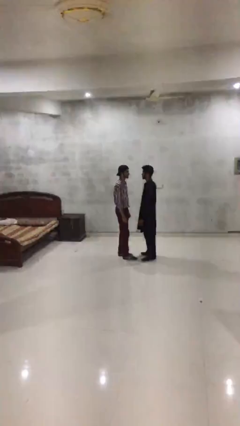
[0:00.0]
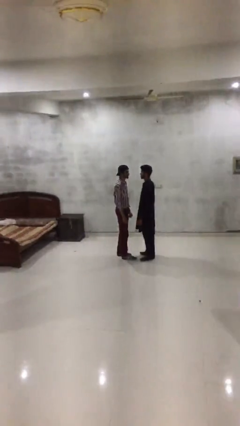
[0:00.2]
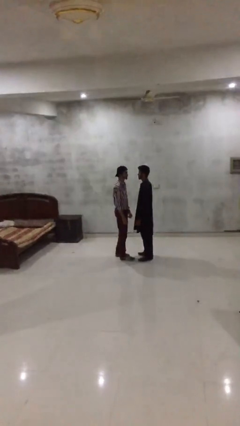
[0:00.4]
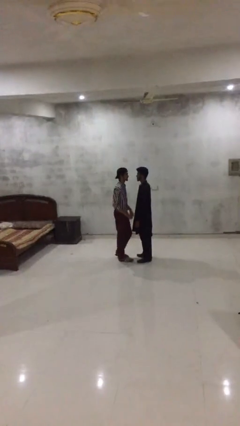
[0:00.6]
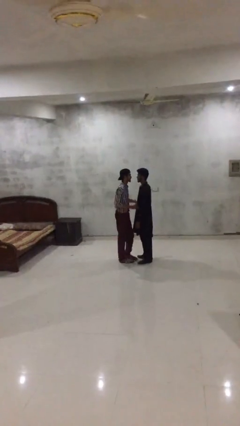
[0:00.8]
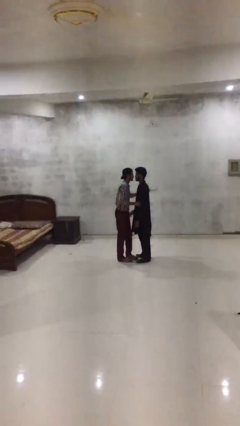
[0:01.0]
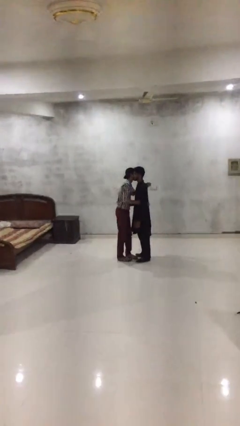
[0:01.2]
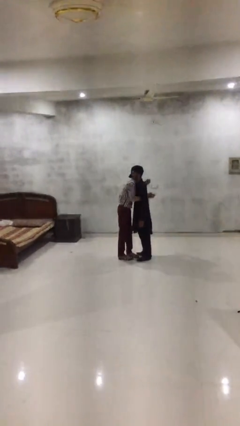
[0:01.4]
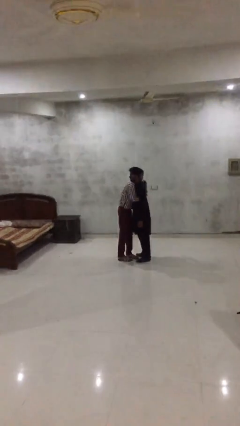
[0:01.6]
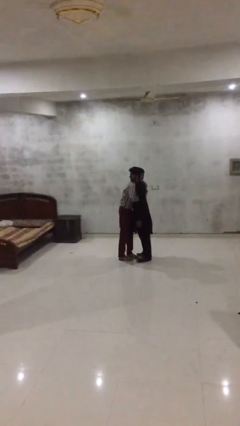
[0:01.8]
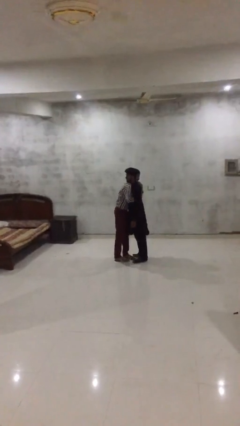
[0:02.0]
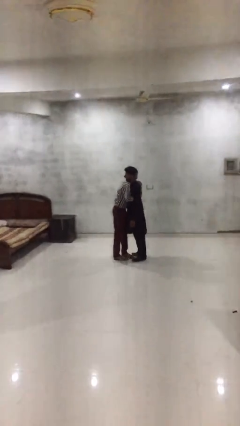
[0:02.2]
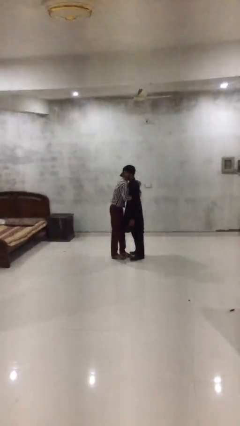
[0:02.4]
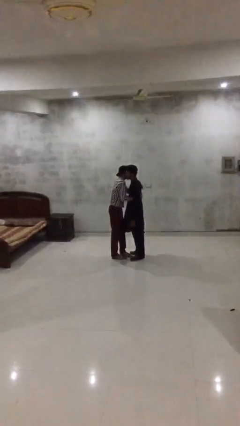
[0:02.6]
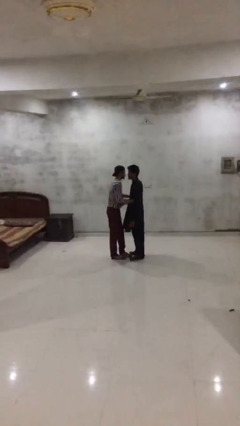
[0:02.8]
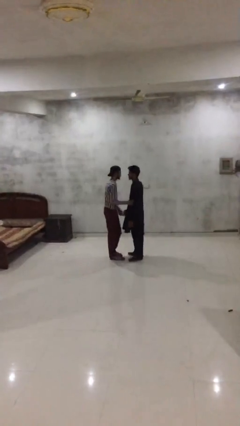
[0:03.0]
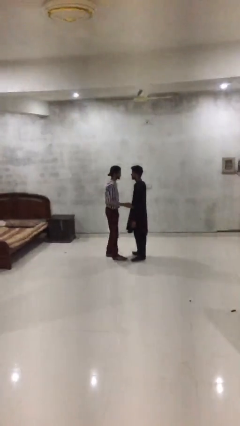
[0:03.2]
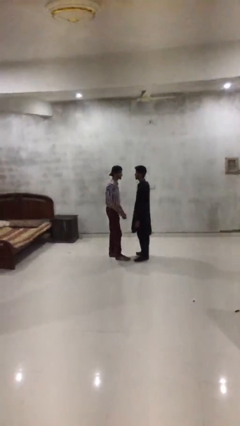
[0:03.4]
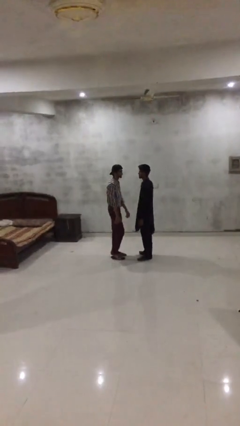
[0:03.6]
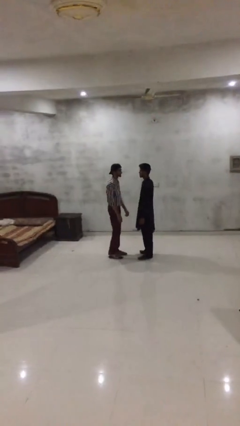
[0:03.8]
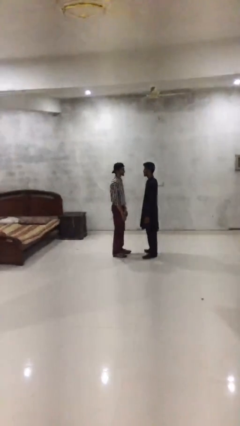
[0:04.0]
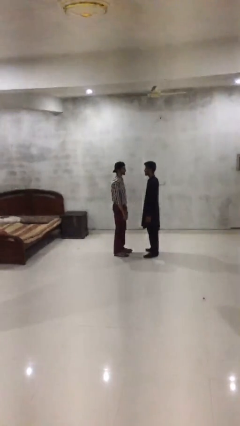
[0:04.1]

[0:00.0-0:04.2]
person embraces person

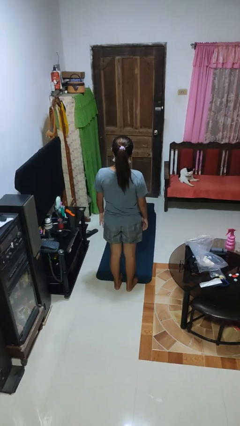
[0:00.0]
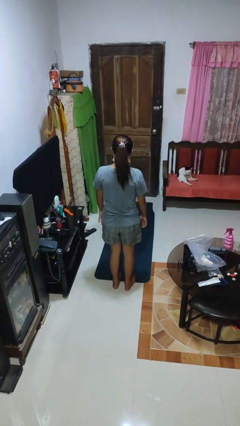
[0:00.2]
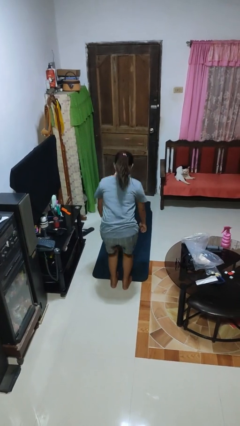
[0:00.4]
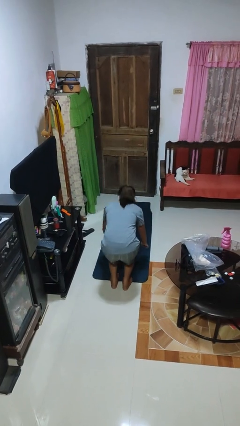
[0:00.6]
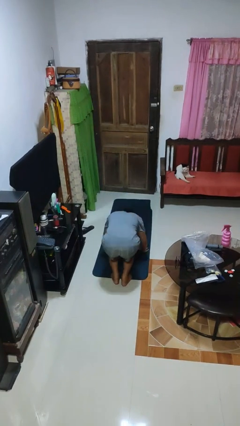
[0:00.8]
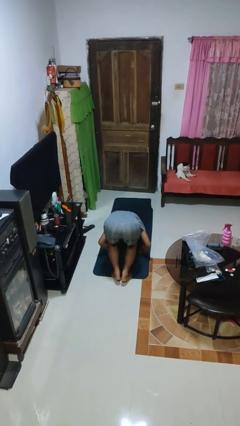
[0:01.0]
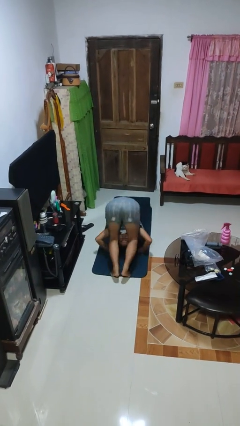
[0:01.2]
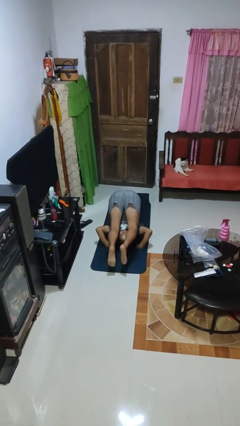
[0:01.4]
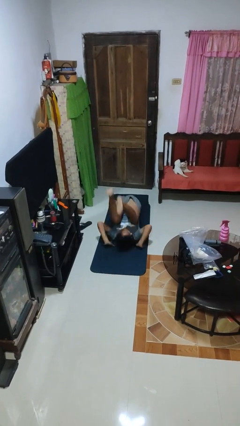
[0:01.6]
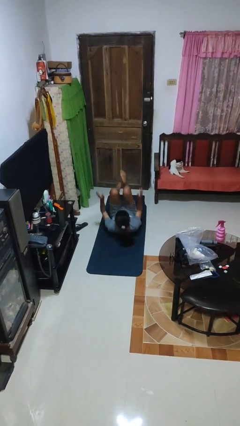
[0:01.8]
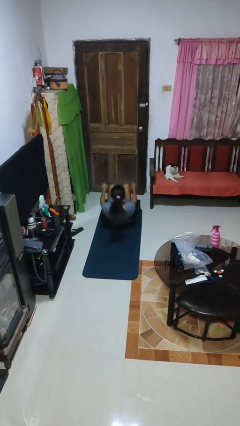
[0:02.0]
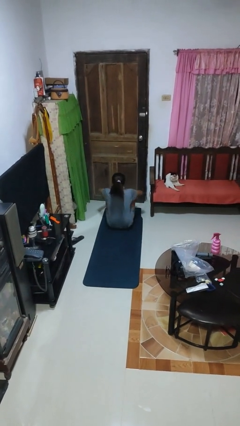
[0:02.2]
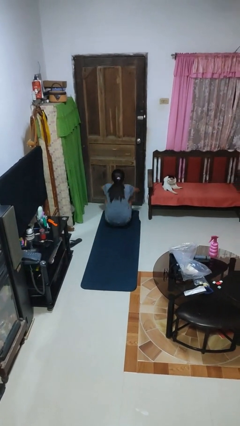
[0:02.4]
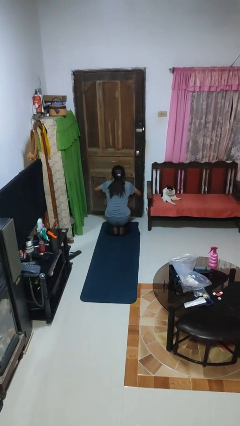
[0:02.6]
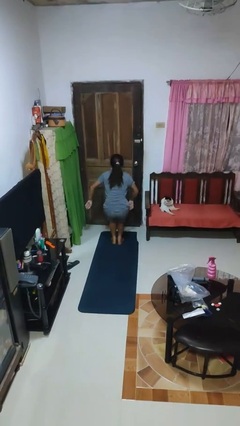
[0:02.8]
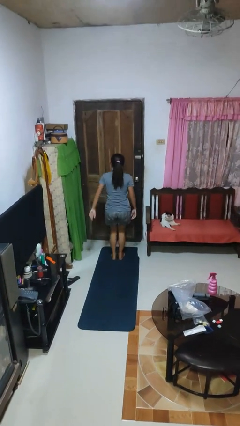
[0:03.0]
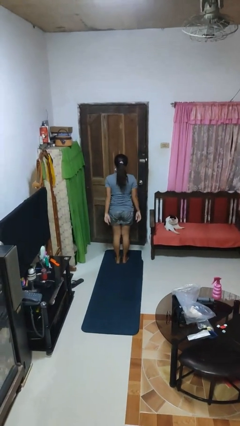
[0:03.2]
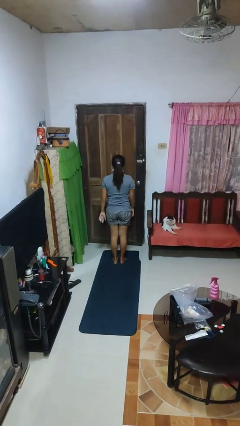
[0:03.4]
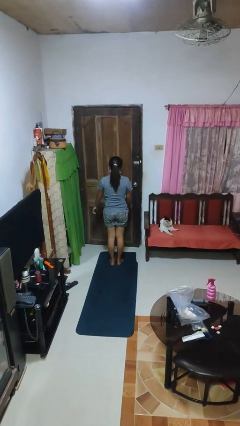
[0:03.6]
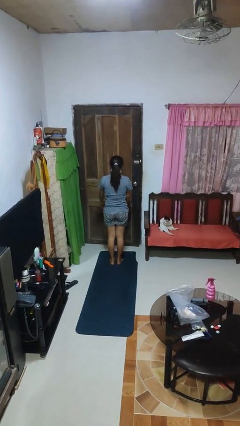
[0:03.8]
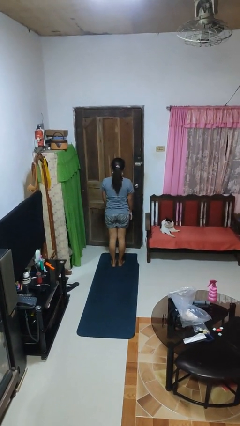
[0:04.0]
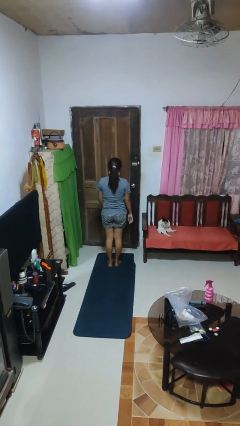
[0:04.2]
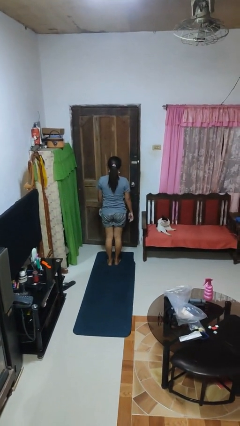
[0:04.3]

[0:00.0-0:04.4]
person somersaults

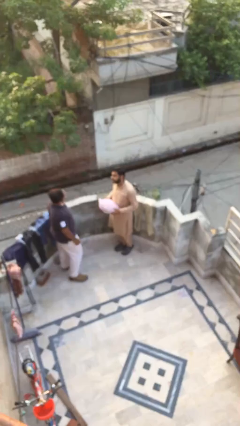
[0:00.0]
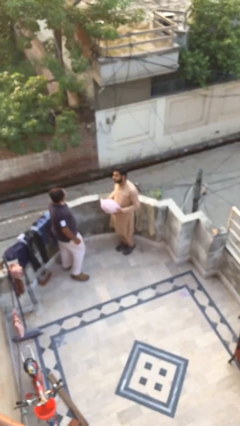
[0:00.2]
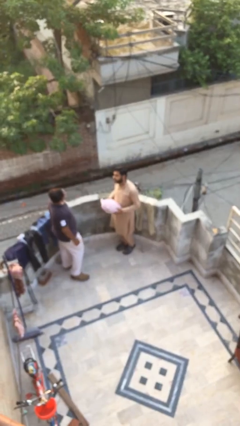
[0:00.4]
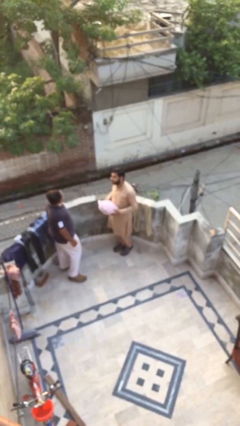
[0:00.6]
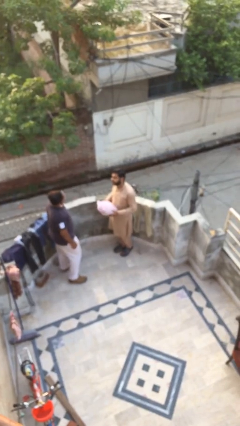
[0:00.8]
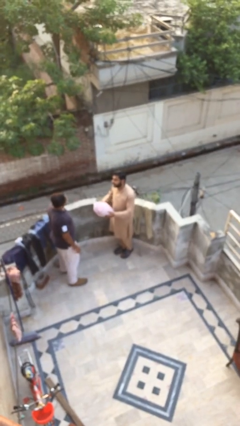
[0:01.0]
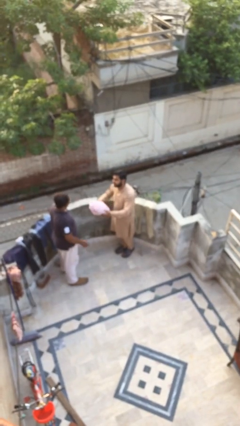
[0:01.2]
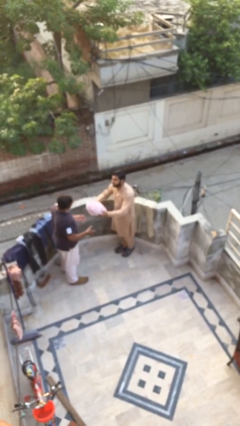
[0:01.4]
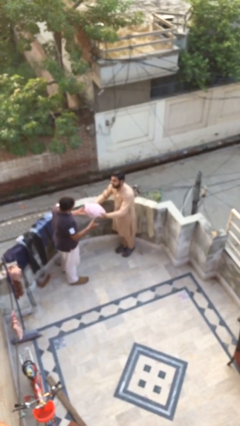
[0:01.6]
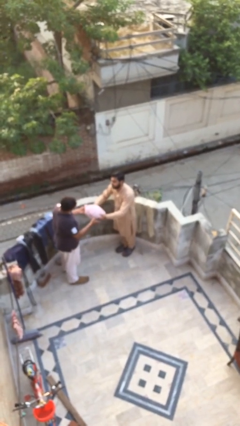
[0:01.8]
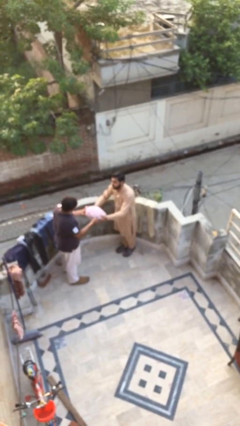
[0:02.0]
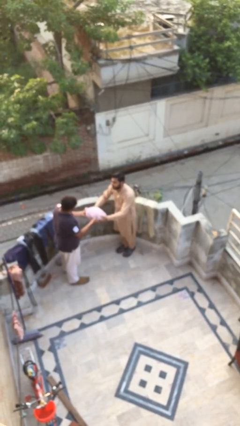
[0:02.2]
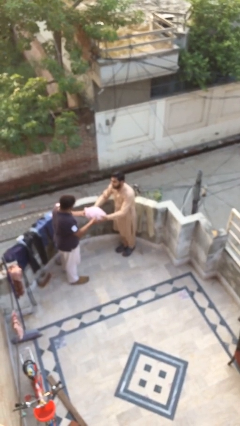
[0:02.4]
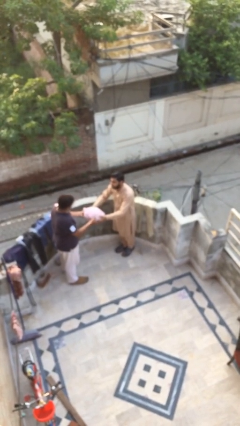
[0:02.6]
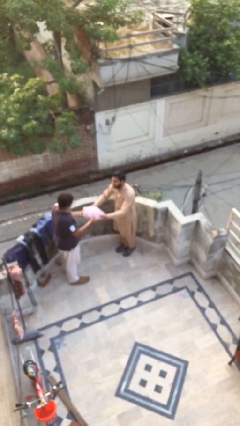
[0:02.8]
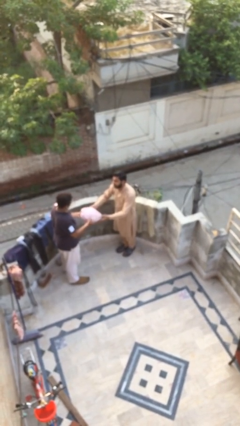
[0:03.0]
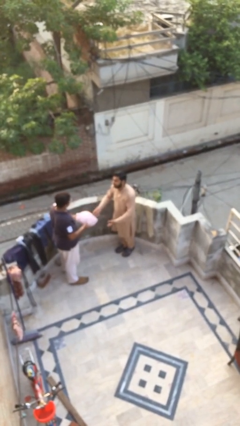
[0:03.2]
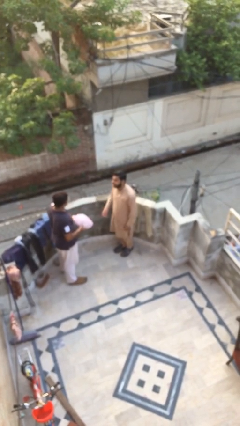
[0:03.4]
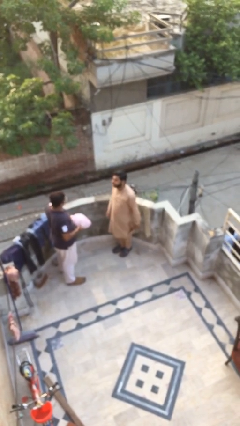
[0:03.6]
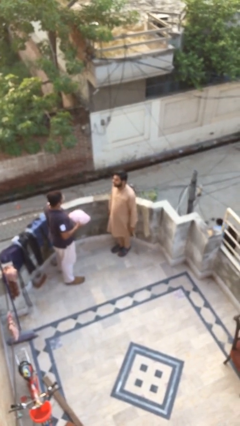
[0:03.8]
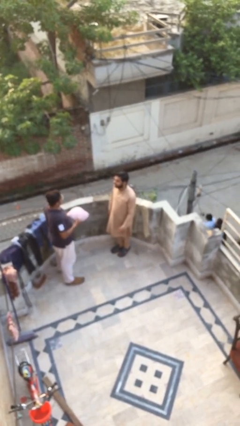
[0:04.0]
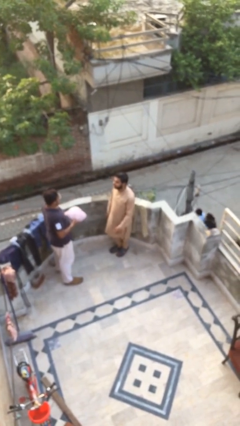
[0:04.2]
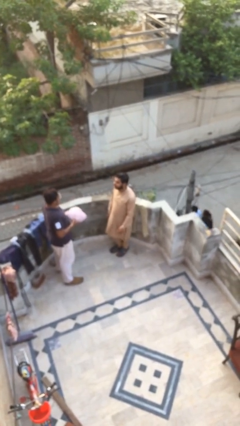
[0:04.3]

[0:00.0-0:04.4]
person transfers object to person

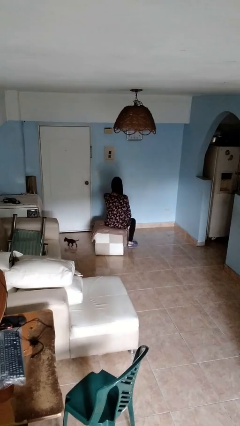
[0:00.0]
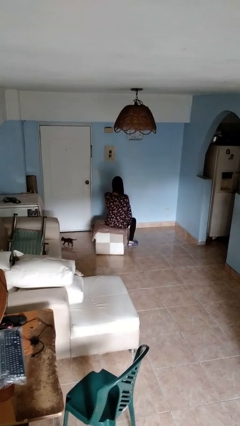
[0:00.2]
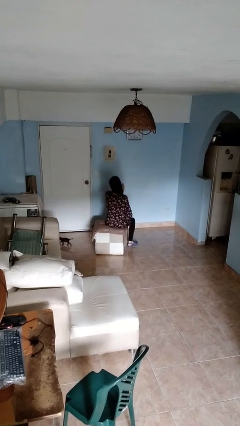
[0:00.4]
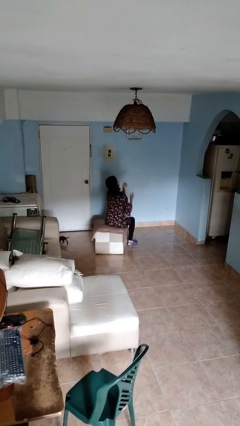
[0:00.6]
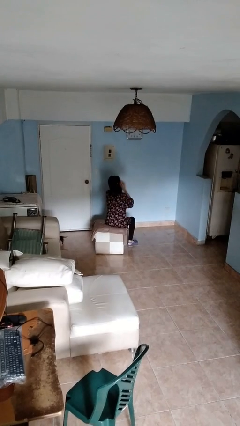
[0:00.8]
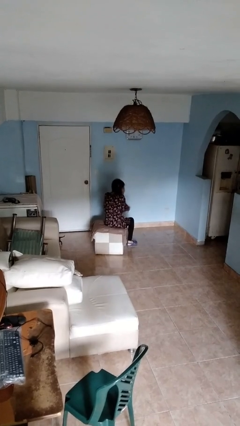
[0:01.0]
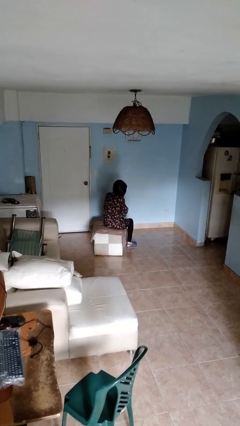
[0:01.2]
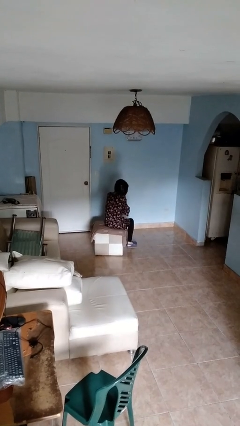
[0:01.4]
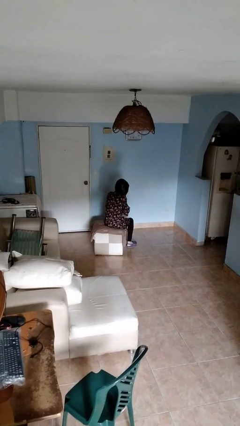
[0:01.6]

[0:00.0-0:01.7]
person sneezes into hand

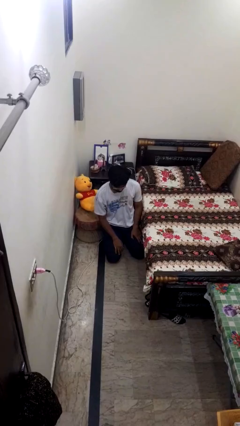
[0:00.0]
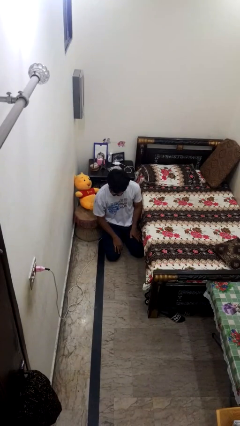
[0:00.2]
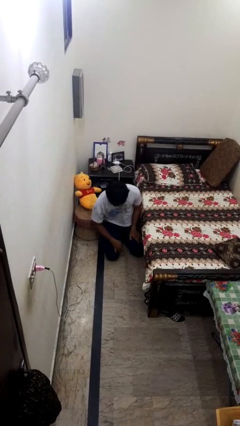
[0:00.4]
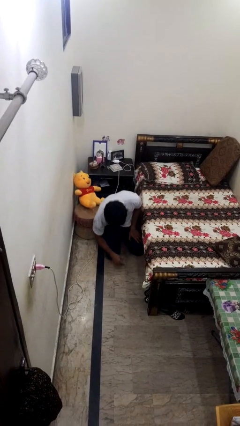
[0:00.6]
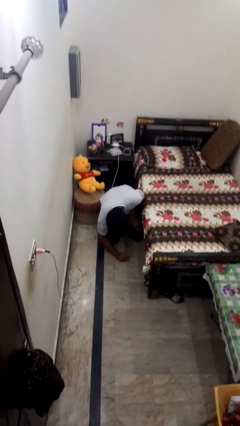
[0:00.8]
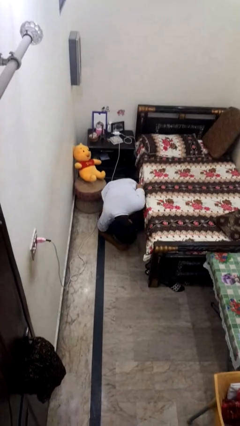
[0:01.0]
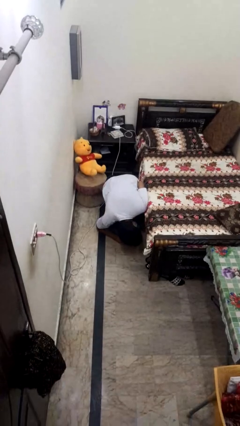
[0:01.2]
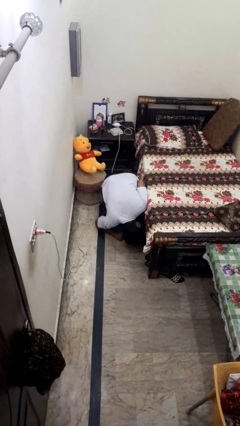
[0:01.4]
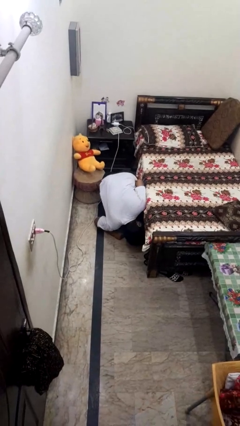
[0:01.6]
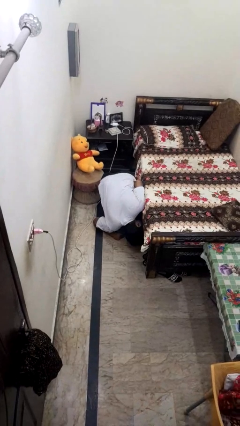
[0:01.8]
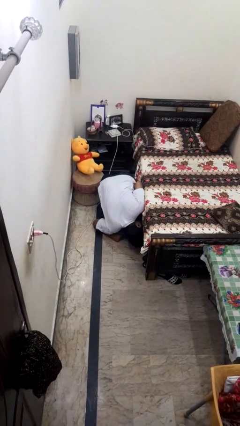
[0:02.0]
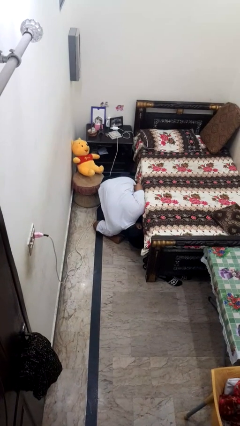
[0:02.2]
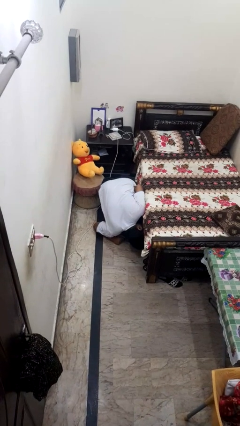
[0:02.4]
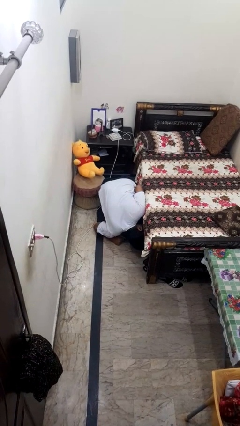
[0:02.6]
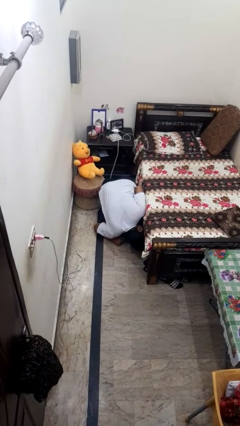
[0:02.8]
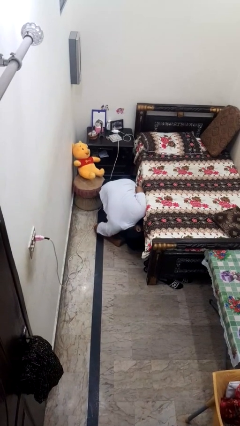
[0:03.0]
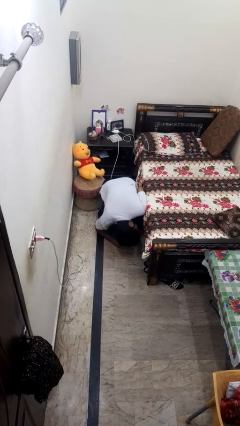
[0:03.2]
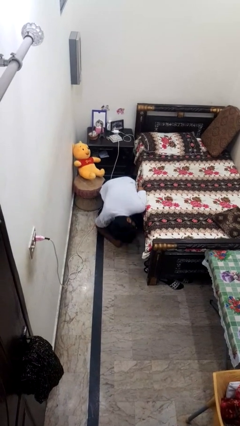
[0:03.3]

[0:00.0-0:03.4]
person searches under bed
